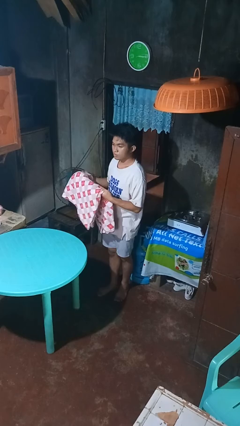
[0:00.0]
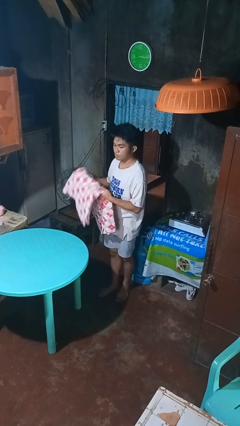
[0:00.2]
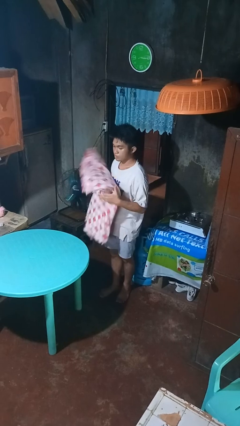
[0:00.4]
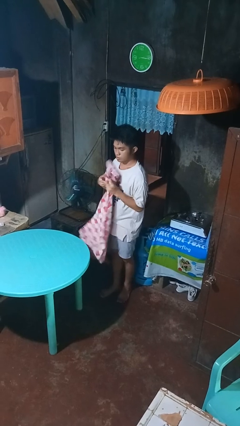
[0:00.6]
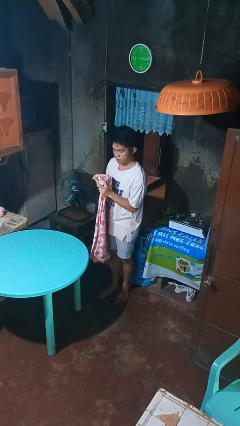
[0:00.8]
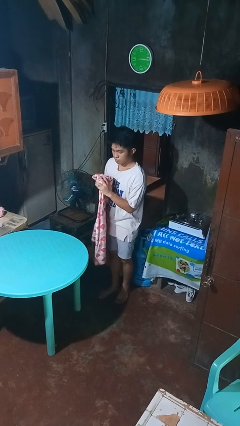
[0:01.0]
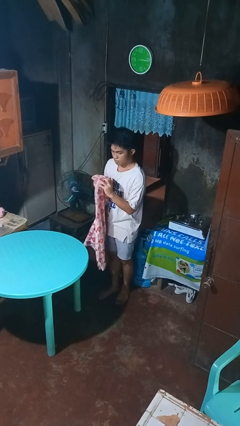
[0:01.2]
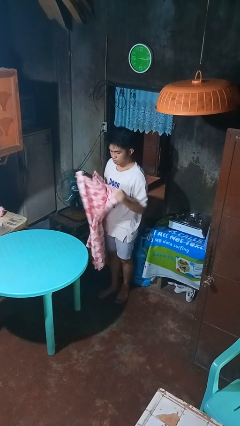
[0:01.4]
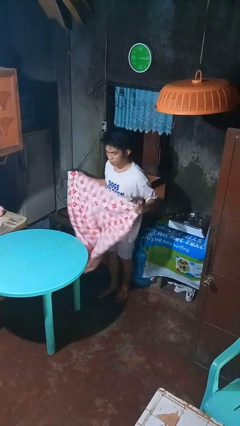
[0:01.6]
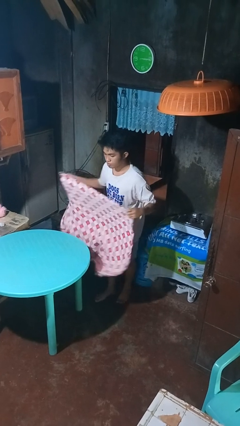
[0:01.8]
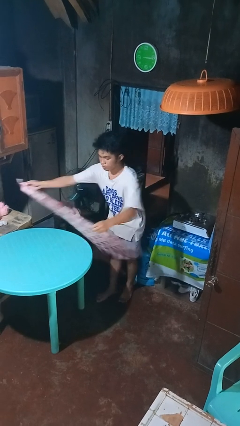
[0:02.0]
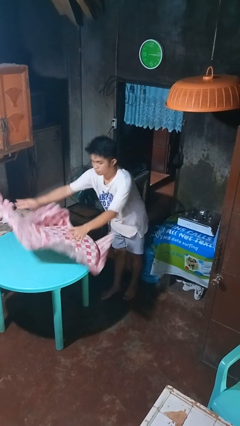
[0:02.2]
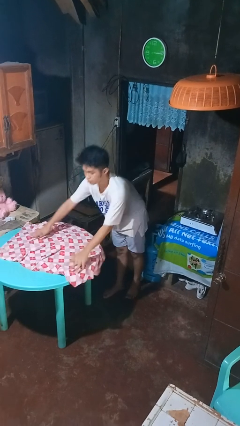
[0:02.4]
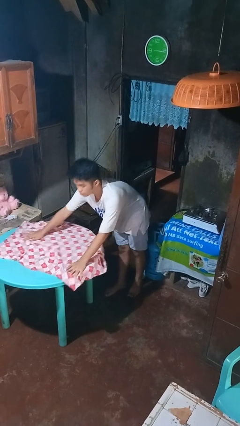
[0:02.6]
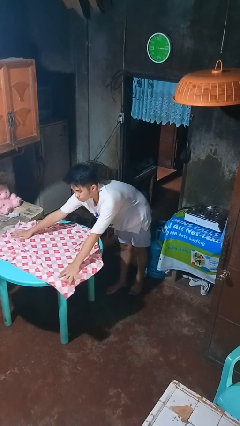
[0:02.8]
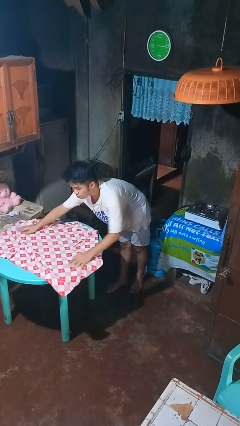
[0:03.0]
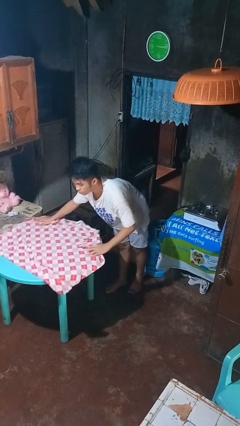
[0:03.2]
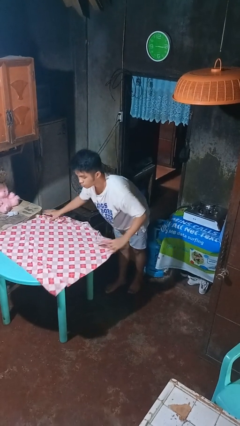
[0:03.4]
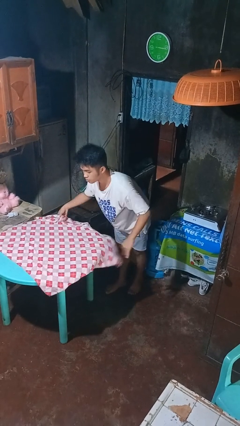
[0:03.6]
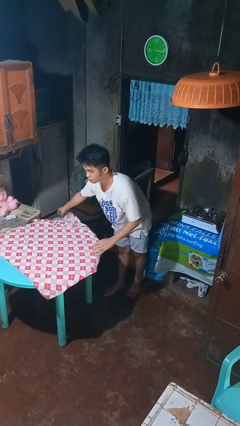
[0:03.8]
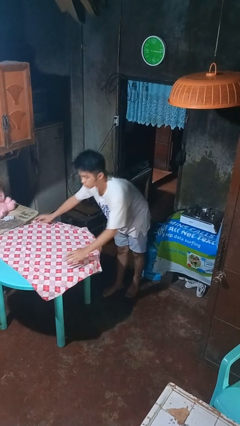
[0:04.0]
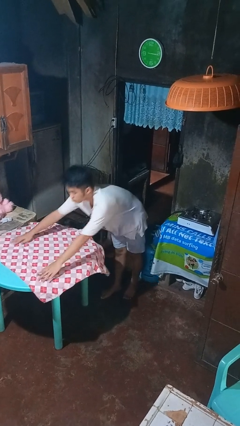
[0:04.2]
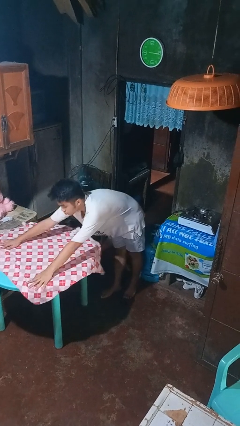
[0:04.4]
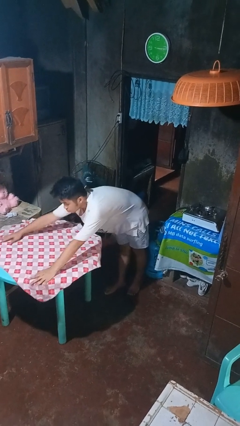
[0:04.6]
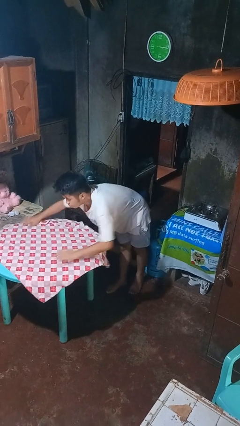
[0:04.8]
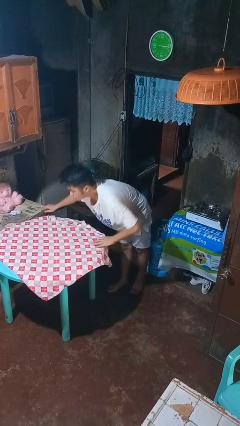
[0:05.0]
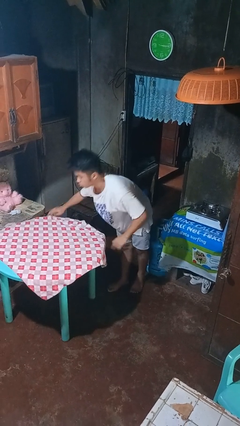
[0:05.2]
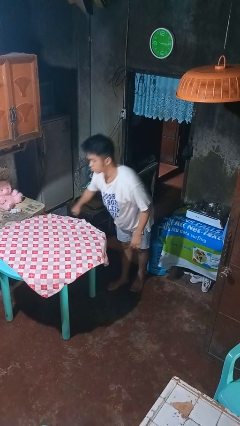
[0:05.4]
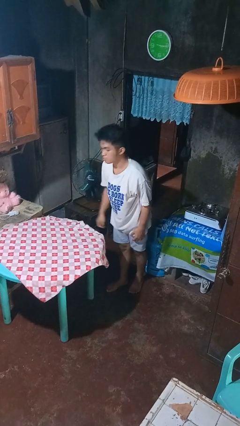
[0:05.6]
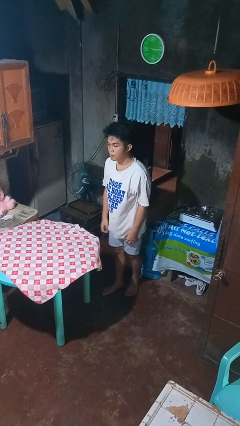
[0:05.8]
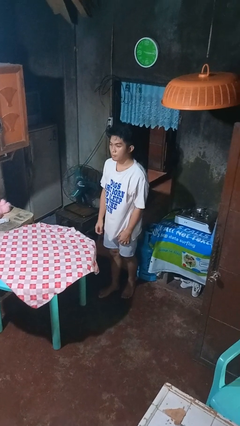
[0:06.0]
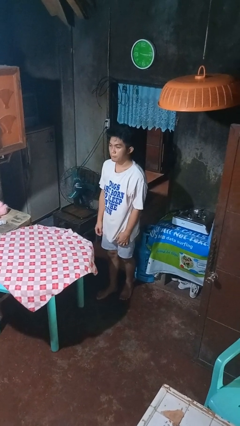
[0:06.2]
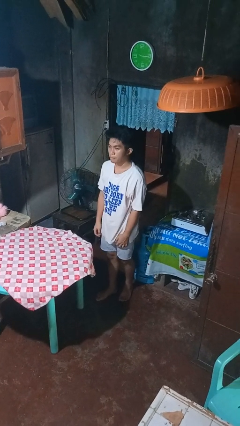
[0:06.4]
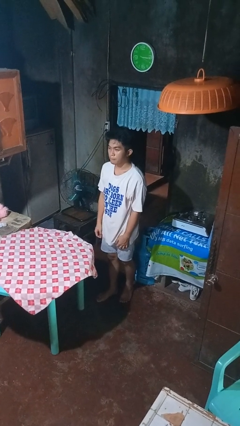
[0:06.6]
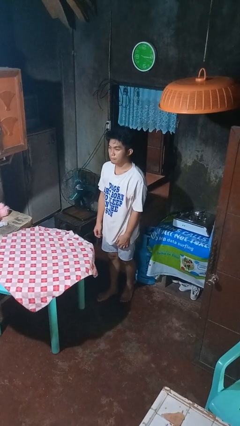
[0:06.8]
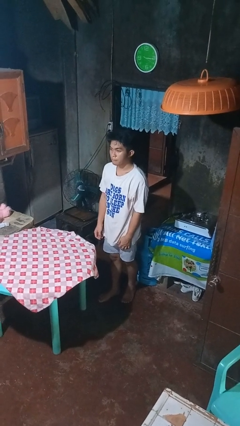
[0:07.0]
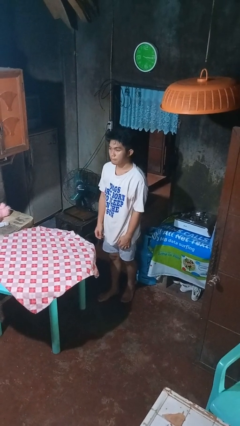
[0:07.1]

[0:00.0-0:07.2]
person spreads tablecloth

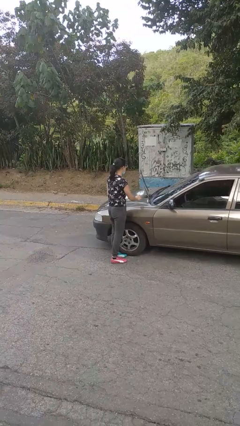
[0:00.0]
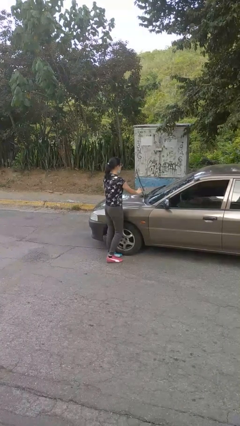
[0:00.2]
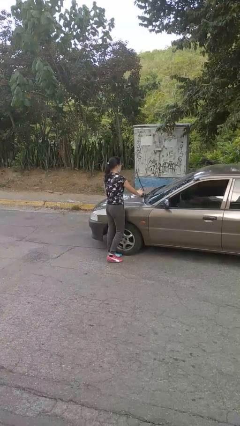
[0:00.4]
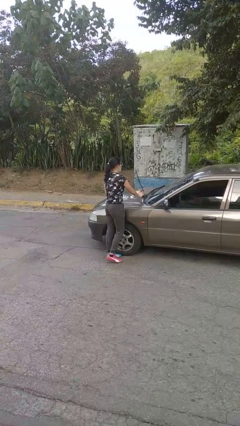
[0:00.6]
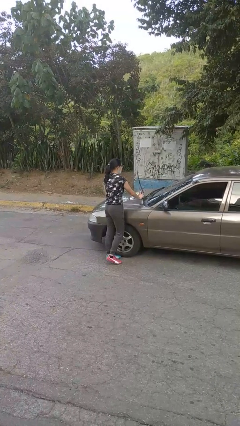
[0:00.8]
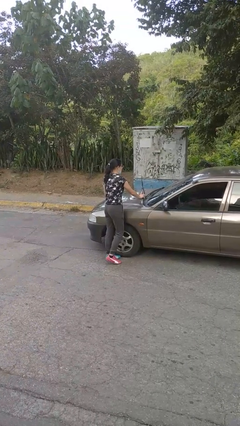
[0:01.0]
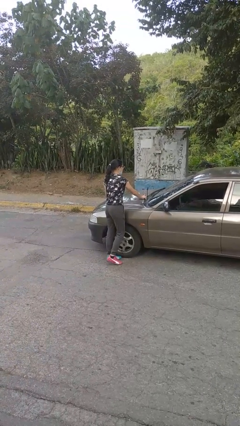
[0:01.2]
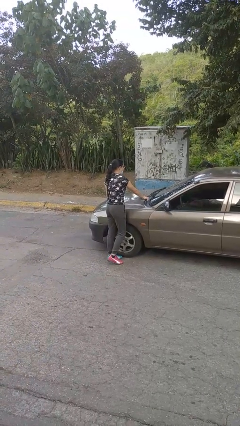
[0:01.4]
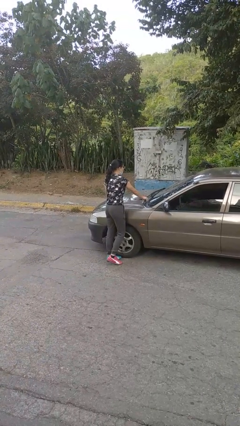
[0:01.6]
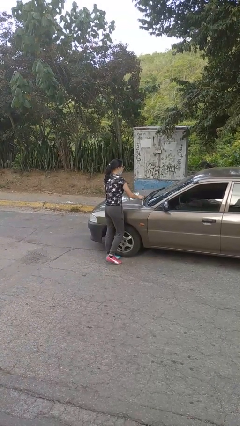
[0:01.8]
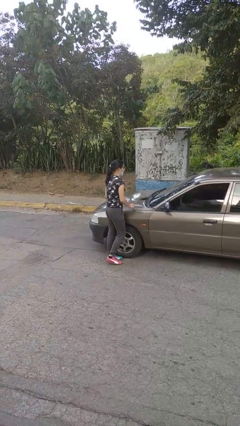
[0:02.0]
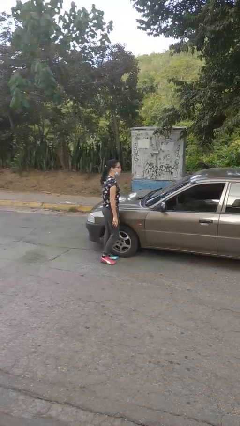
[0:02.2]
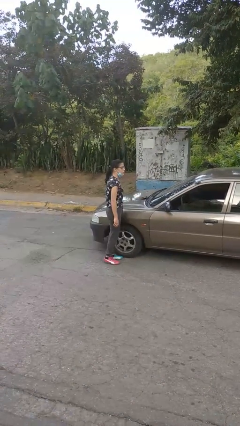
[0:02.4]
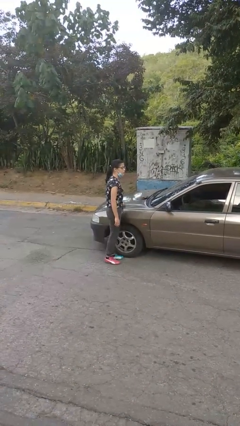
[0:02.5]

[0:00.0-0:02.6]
person flips down car wipers

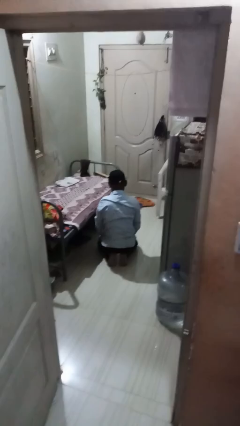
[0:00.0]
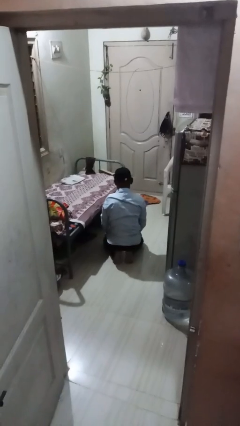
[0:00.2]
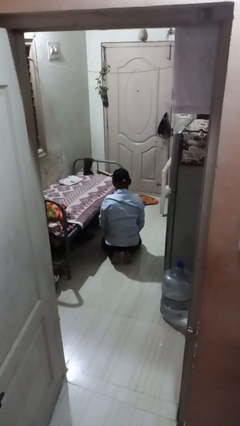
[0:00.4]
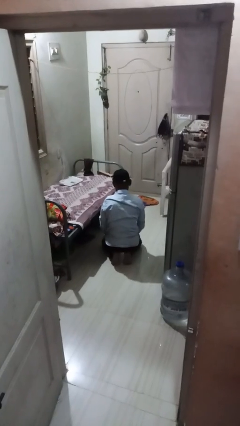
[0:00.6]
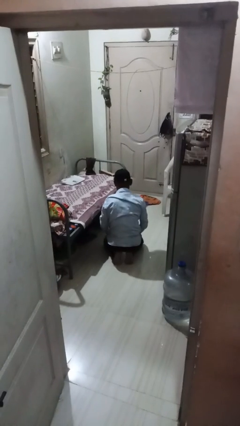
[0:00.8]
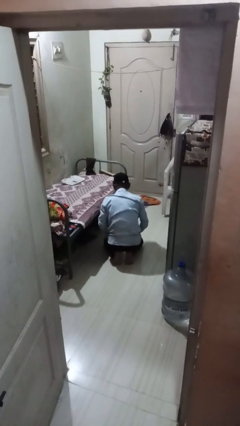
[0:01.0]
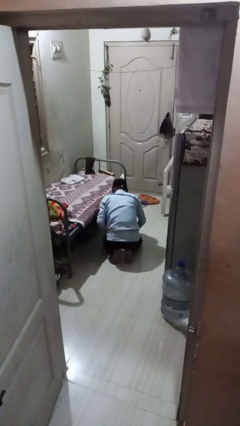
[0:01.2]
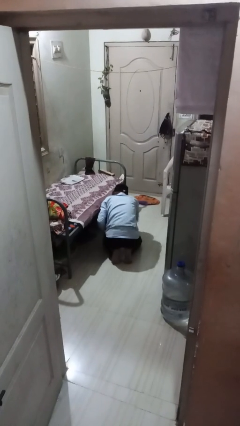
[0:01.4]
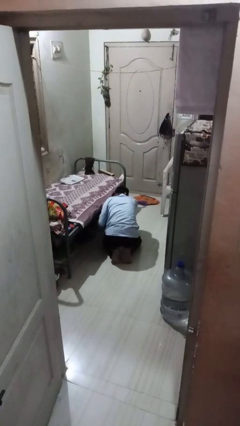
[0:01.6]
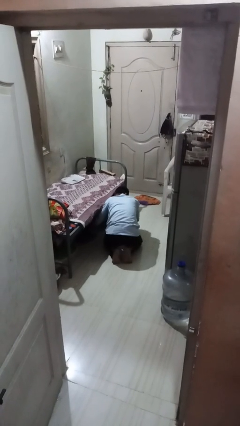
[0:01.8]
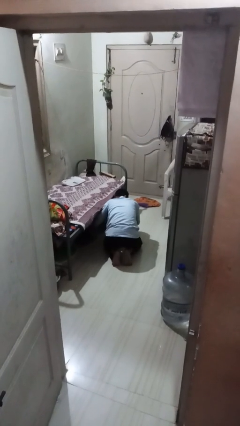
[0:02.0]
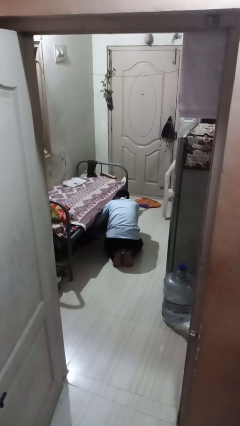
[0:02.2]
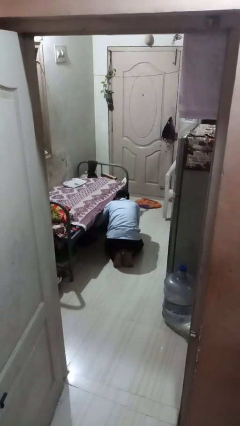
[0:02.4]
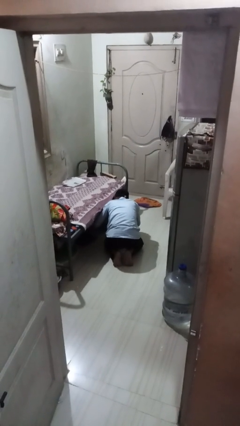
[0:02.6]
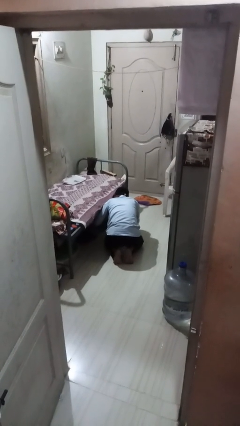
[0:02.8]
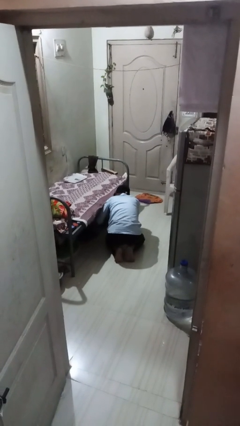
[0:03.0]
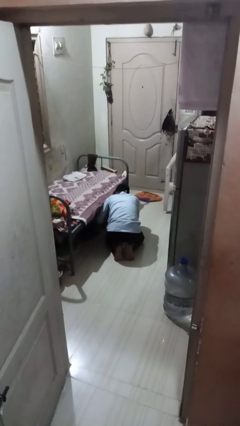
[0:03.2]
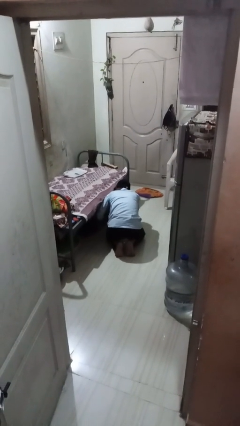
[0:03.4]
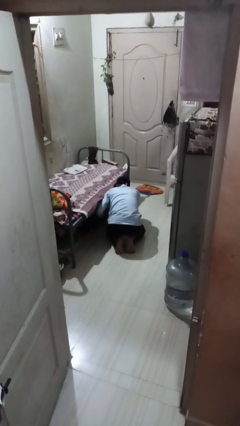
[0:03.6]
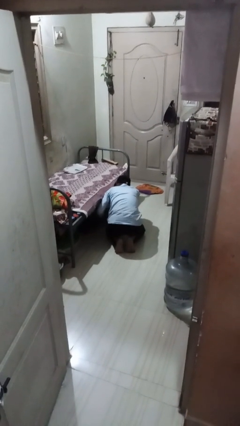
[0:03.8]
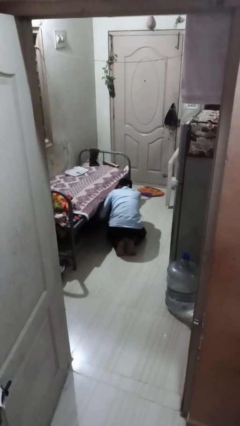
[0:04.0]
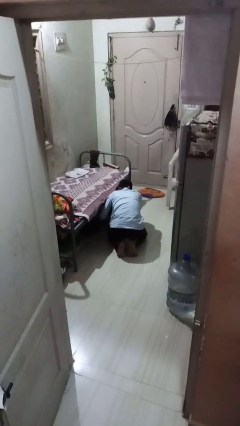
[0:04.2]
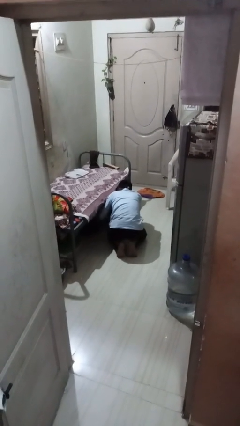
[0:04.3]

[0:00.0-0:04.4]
person searches under bed

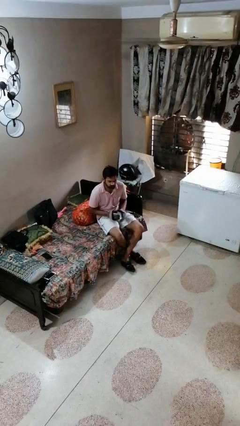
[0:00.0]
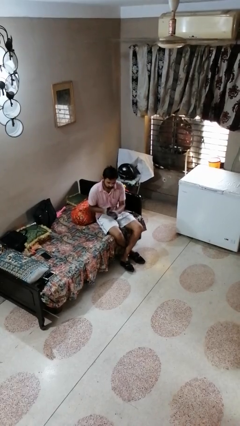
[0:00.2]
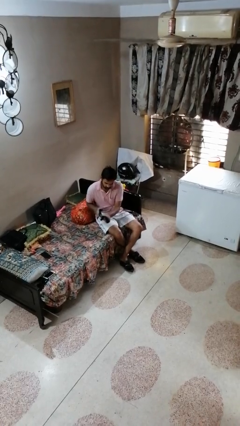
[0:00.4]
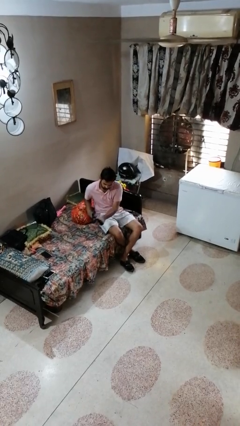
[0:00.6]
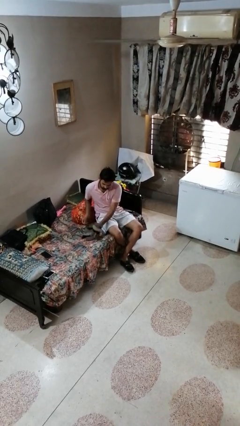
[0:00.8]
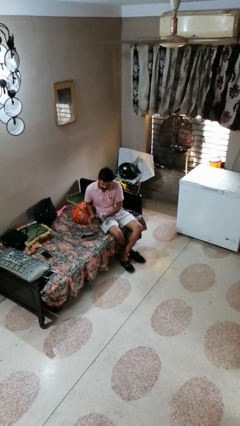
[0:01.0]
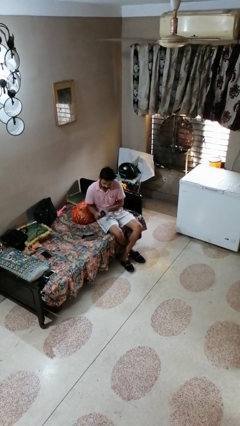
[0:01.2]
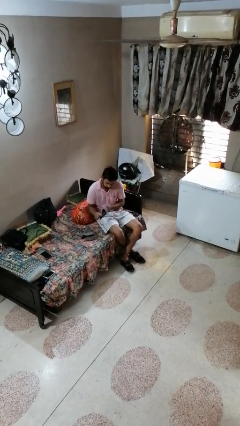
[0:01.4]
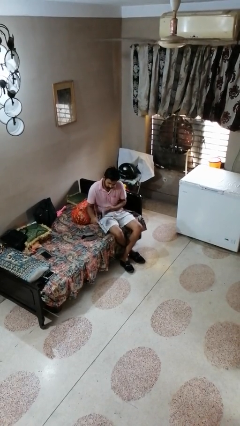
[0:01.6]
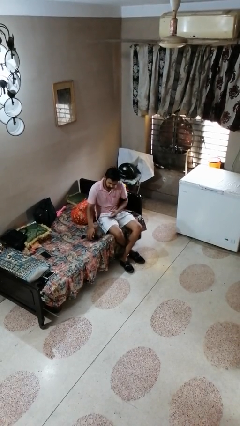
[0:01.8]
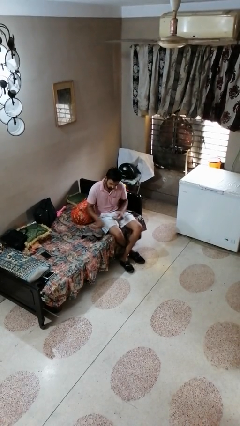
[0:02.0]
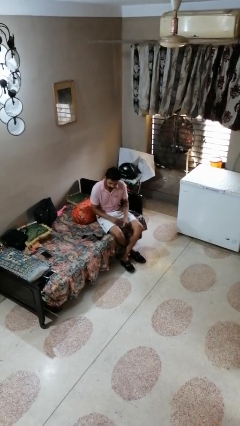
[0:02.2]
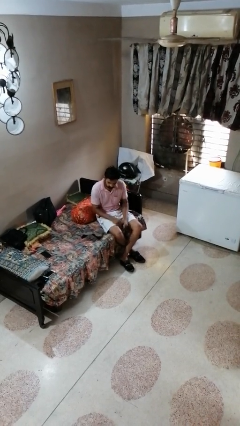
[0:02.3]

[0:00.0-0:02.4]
person takes off gloves

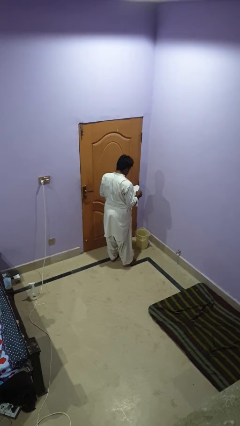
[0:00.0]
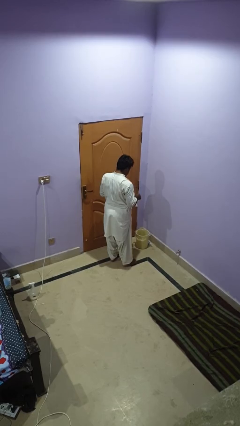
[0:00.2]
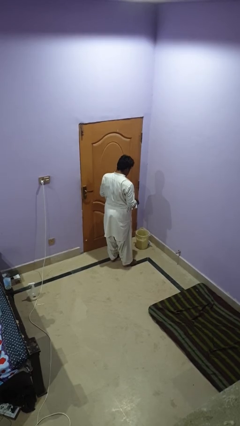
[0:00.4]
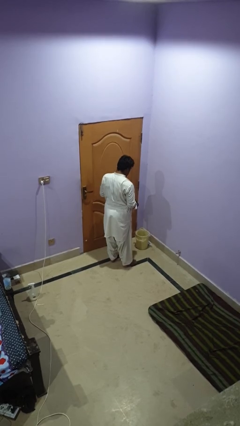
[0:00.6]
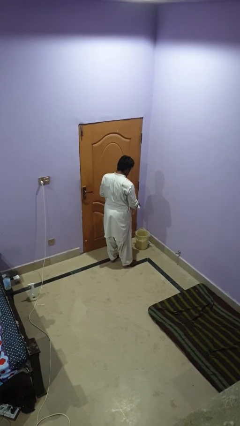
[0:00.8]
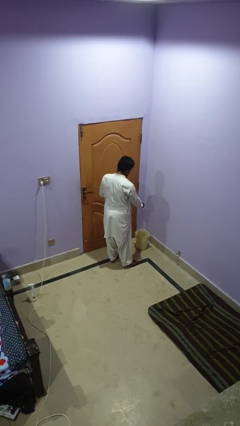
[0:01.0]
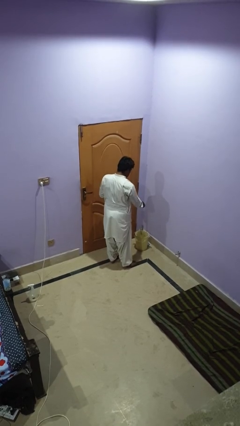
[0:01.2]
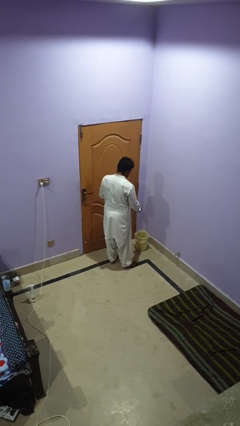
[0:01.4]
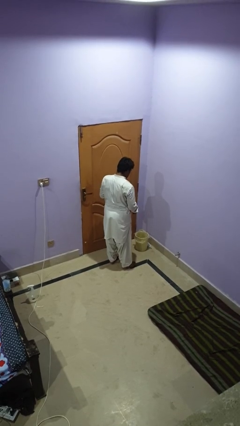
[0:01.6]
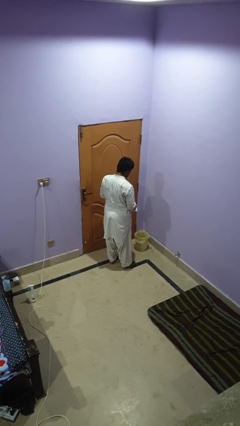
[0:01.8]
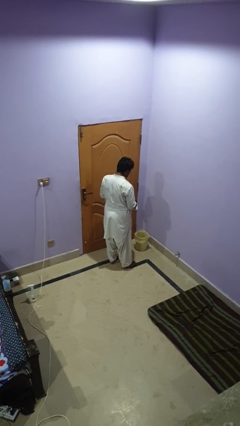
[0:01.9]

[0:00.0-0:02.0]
person discards trash
